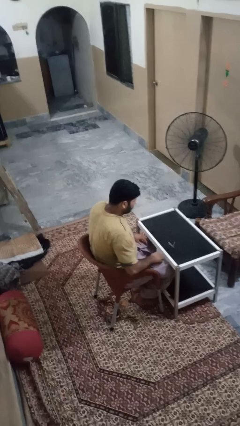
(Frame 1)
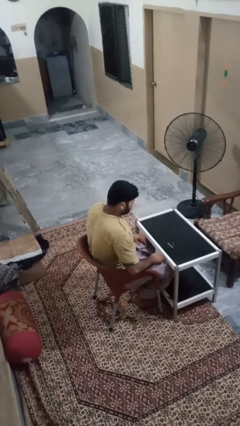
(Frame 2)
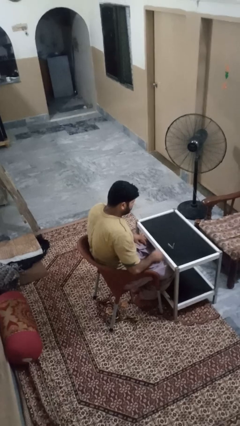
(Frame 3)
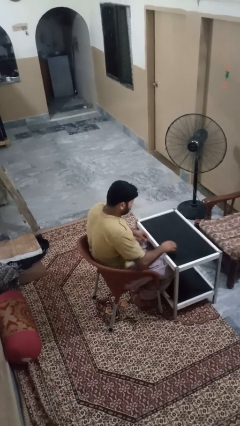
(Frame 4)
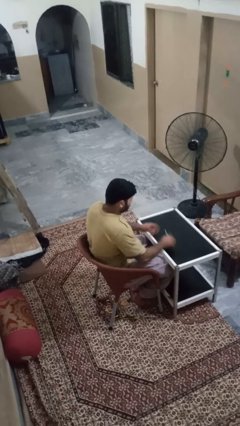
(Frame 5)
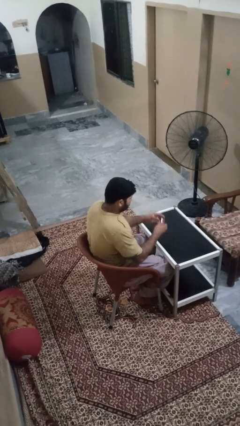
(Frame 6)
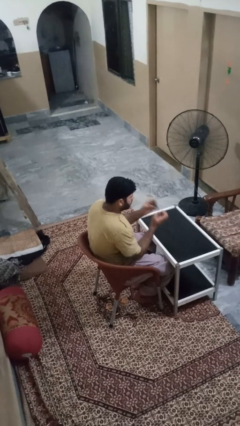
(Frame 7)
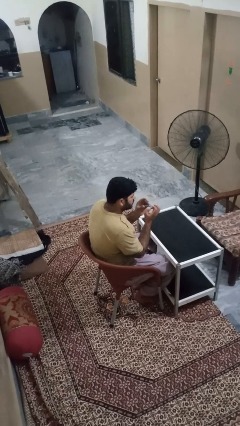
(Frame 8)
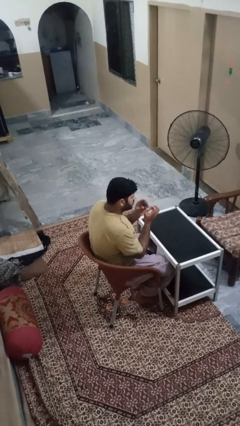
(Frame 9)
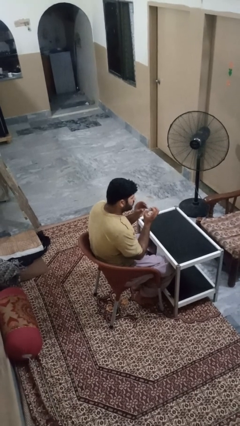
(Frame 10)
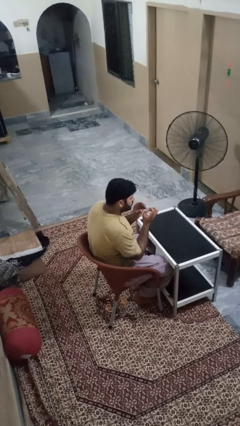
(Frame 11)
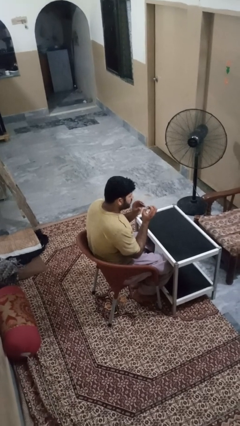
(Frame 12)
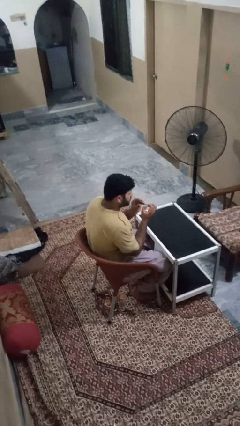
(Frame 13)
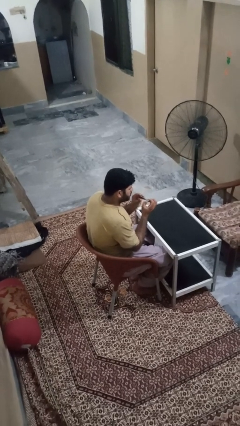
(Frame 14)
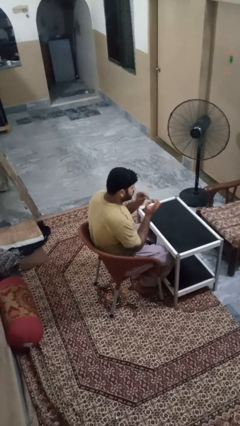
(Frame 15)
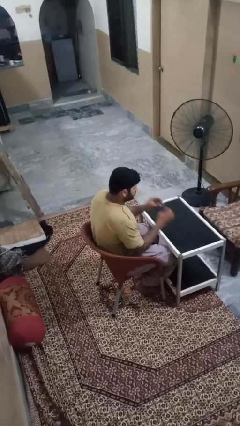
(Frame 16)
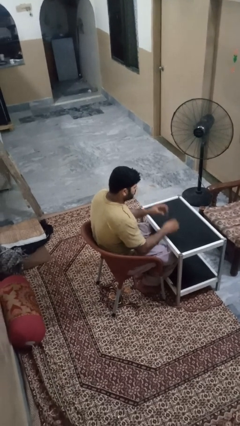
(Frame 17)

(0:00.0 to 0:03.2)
person clips fingernails

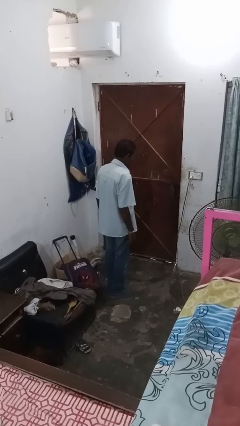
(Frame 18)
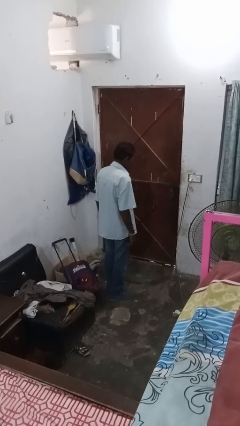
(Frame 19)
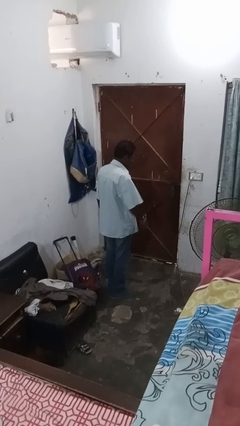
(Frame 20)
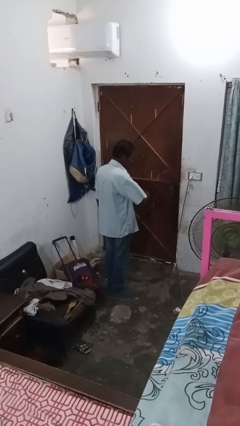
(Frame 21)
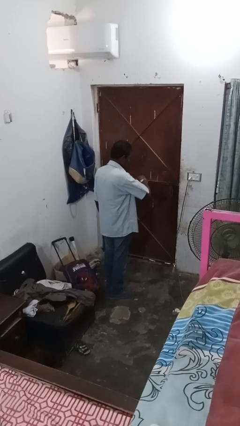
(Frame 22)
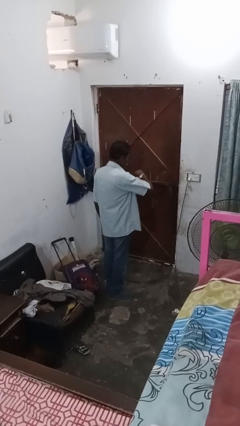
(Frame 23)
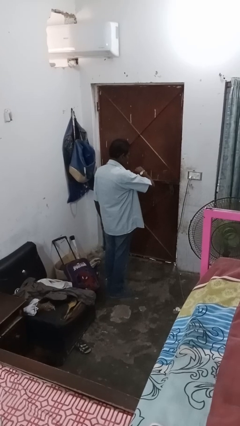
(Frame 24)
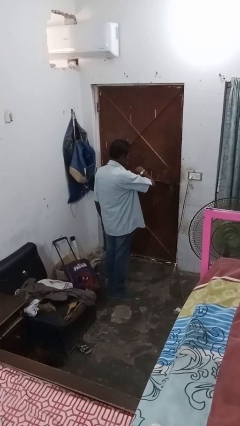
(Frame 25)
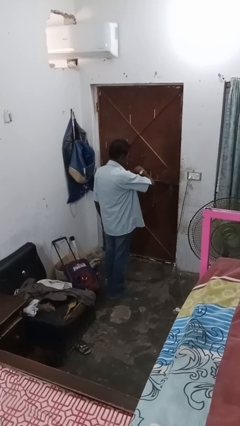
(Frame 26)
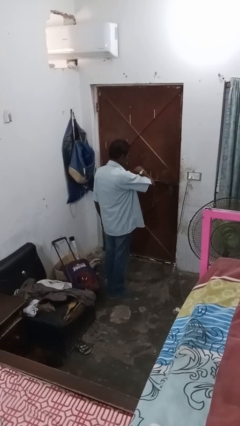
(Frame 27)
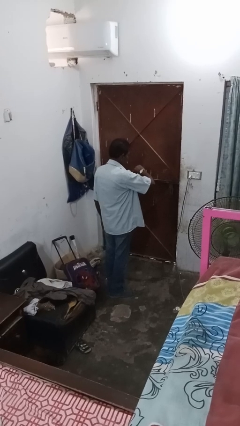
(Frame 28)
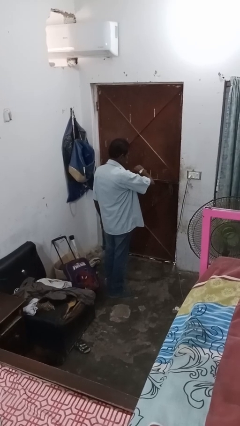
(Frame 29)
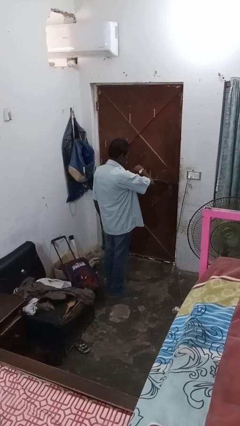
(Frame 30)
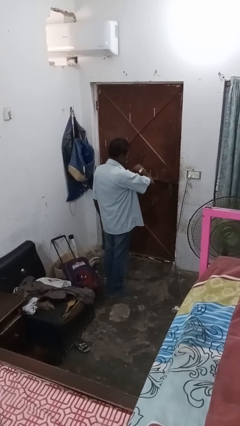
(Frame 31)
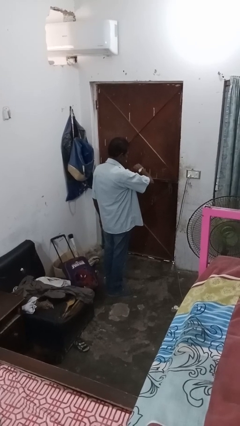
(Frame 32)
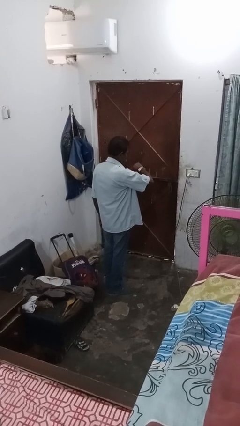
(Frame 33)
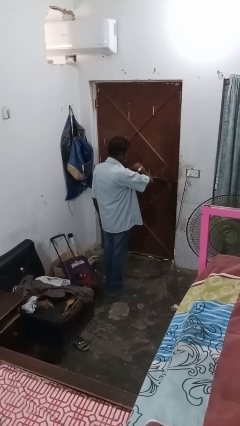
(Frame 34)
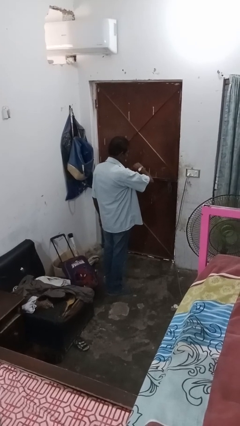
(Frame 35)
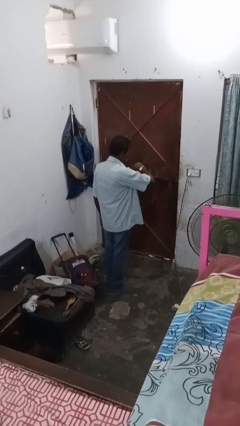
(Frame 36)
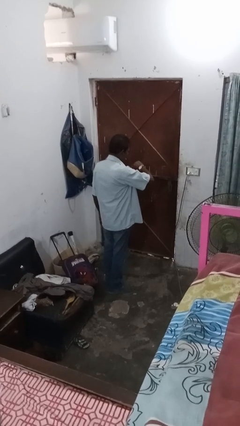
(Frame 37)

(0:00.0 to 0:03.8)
person puts on wristwatch

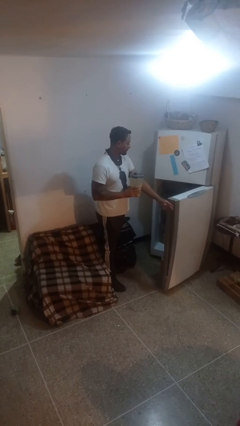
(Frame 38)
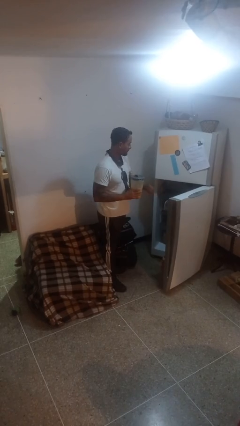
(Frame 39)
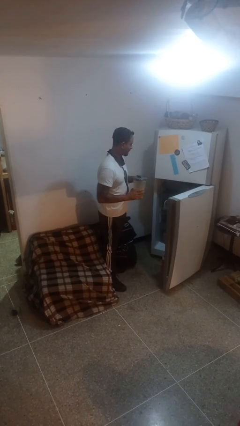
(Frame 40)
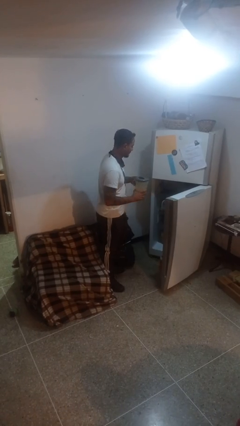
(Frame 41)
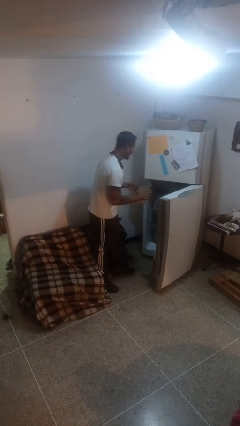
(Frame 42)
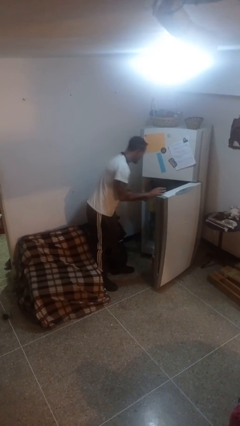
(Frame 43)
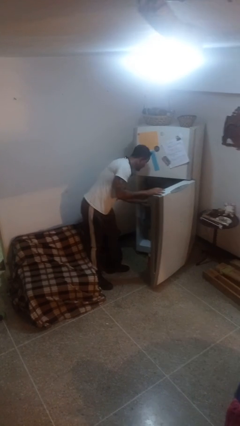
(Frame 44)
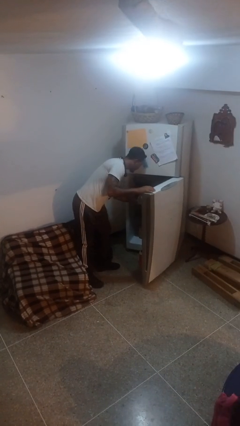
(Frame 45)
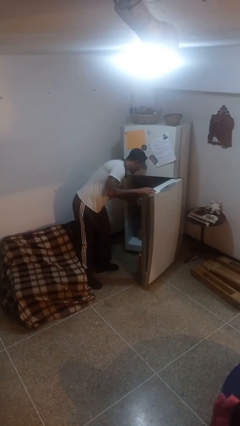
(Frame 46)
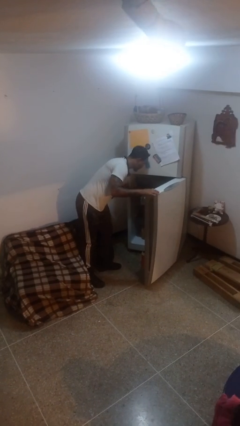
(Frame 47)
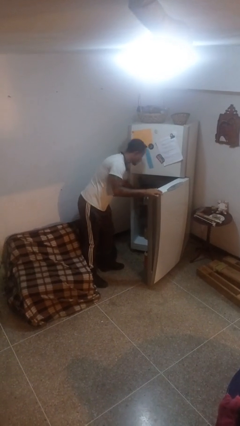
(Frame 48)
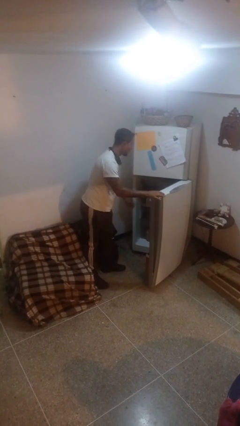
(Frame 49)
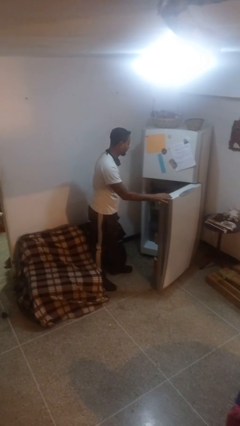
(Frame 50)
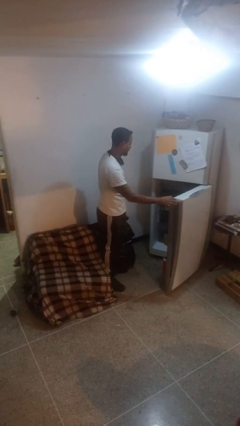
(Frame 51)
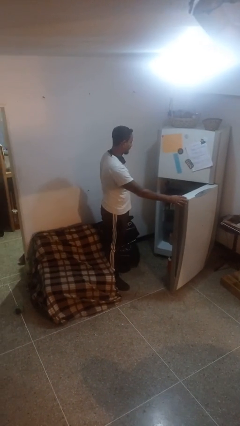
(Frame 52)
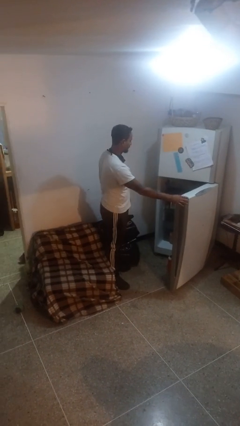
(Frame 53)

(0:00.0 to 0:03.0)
person puts object into refrigerator

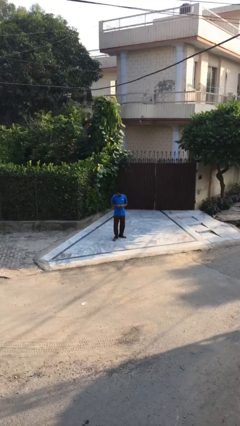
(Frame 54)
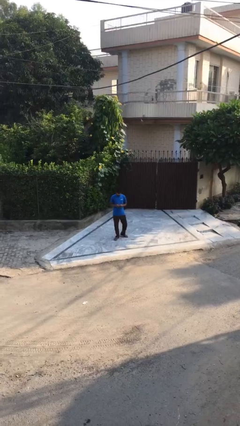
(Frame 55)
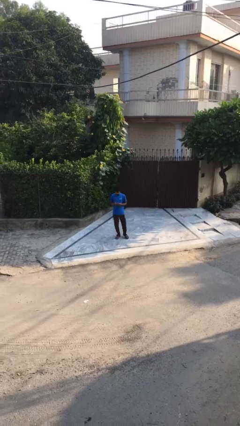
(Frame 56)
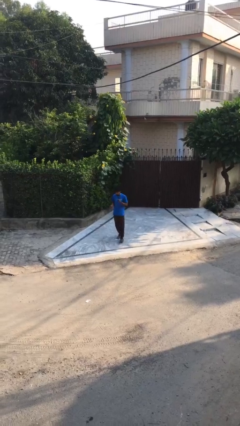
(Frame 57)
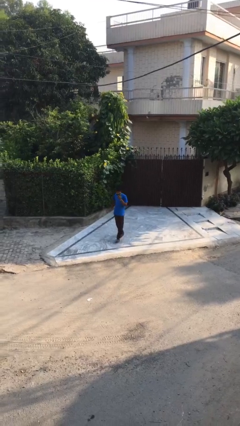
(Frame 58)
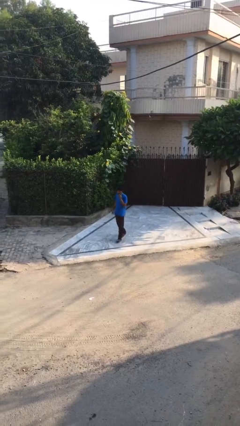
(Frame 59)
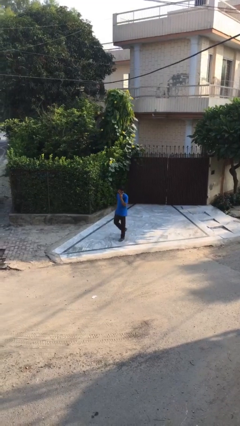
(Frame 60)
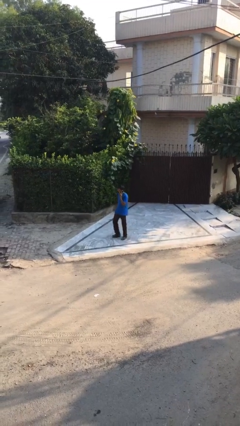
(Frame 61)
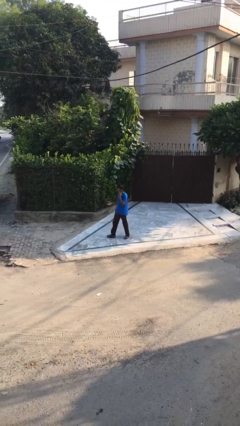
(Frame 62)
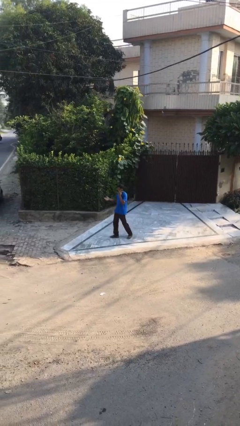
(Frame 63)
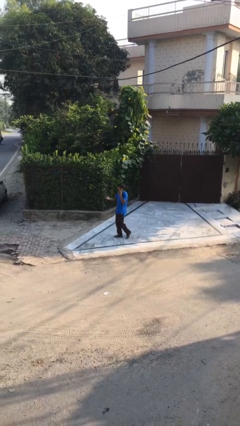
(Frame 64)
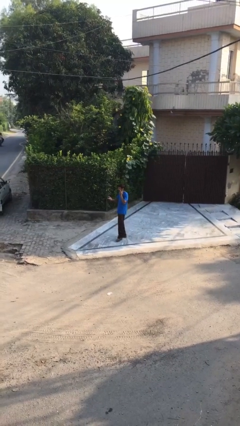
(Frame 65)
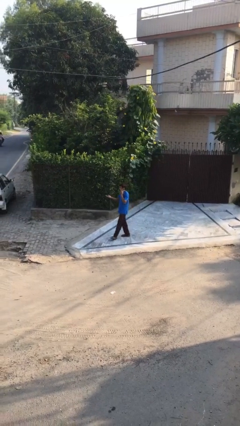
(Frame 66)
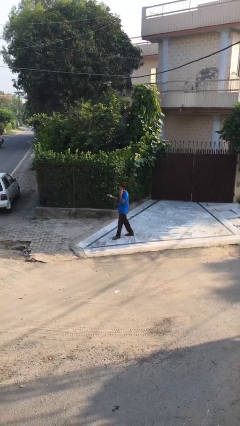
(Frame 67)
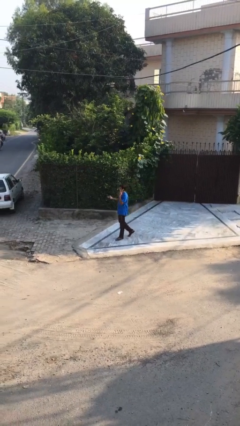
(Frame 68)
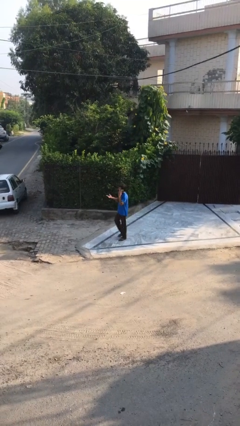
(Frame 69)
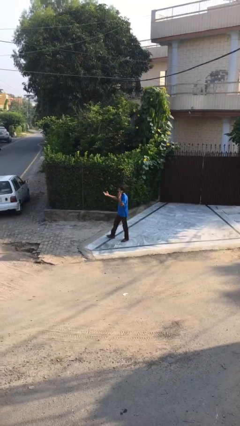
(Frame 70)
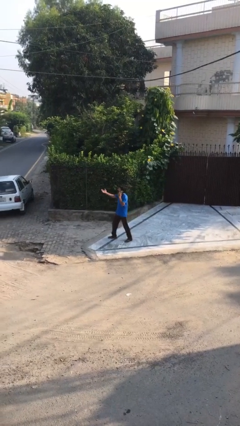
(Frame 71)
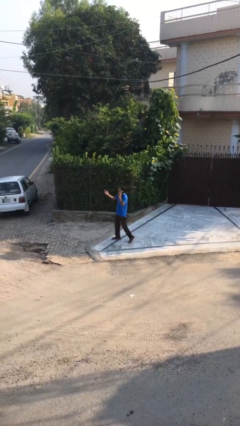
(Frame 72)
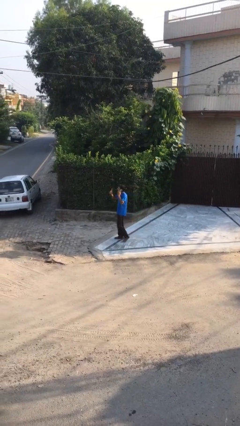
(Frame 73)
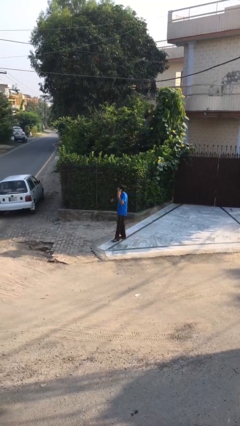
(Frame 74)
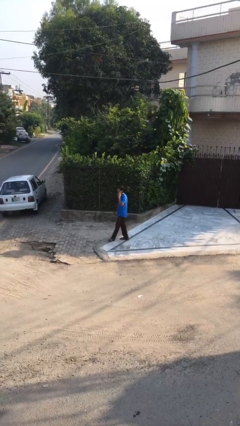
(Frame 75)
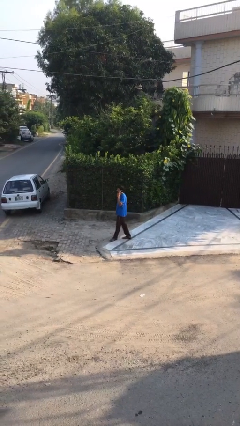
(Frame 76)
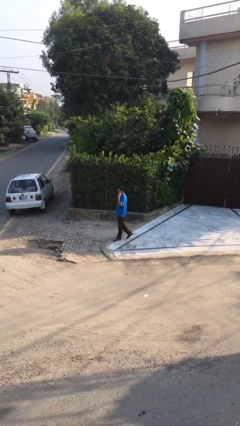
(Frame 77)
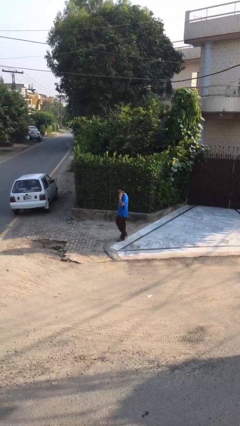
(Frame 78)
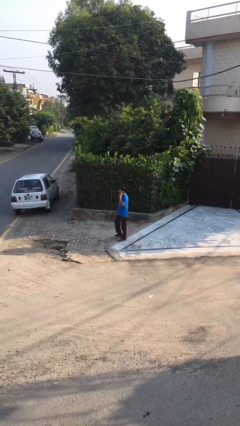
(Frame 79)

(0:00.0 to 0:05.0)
person talks on phone

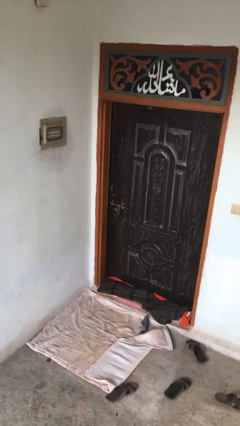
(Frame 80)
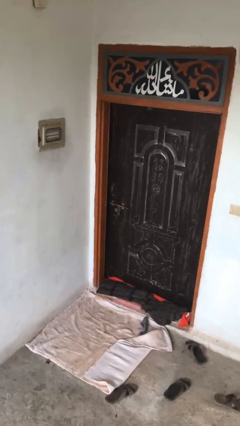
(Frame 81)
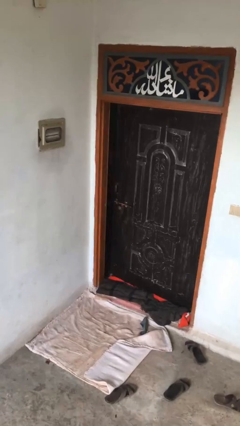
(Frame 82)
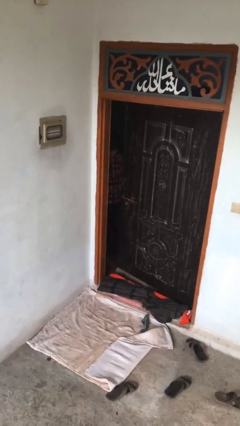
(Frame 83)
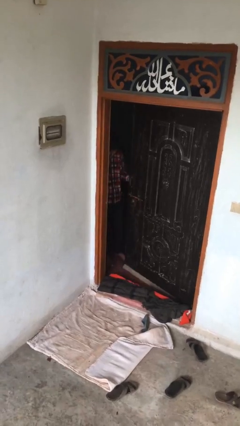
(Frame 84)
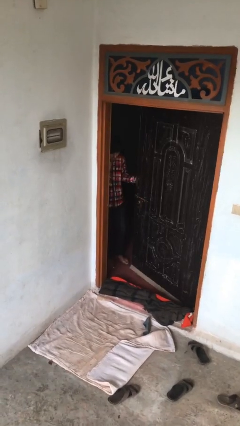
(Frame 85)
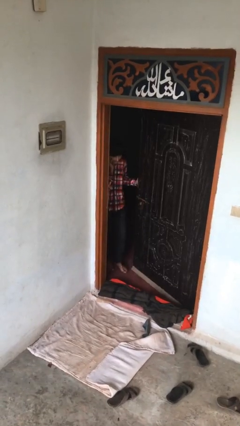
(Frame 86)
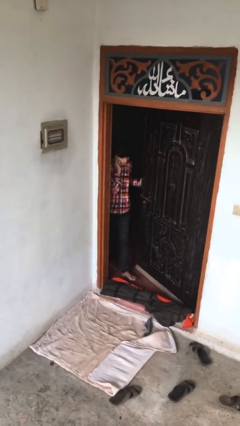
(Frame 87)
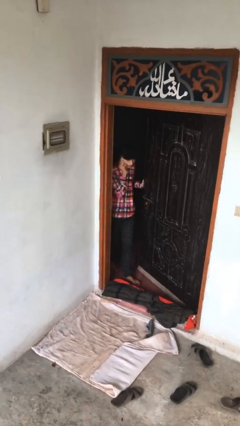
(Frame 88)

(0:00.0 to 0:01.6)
person opens facility door

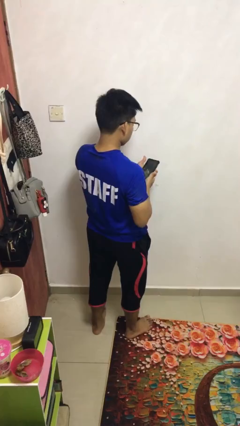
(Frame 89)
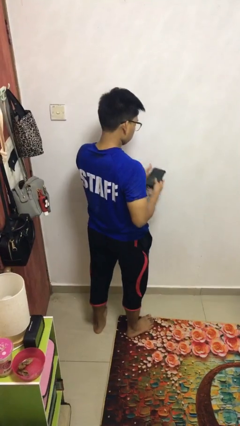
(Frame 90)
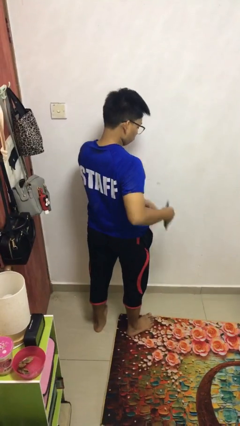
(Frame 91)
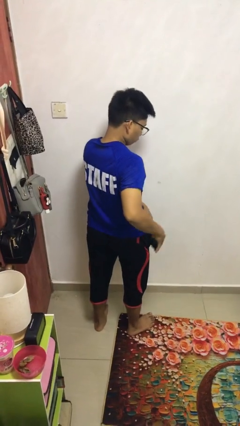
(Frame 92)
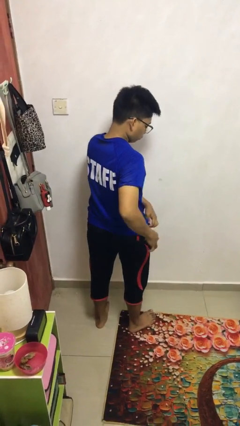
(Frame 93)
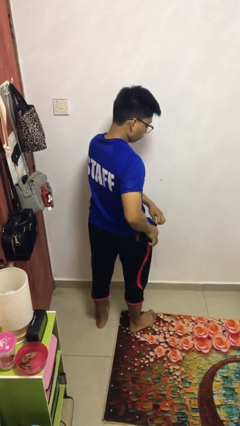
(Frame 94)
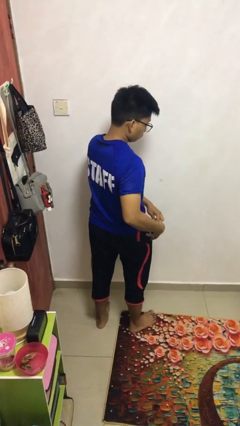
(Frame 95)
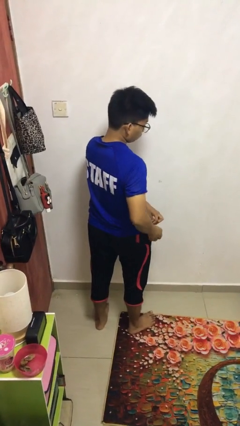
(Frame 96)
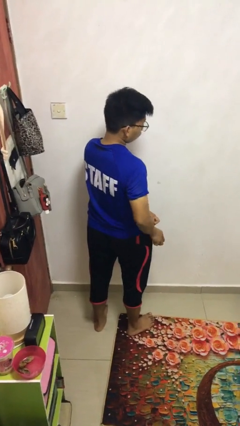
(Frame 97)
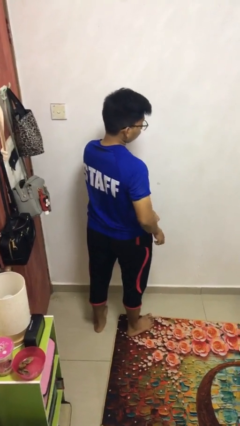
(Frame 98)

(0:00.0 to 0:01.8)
person puts phone into pocket
